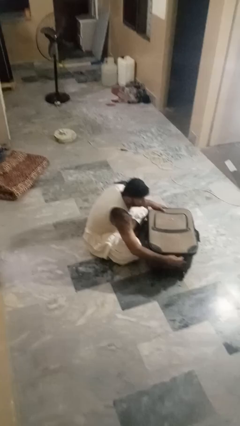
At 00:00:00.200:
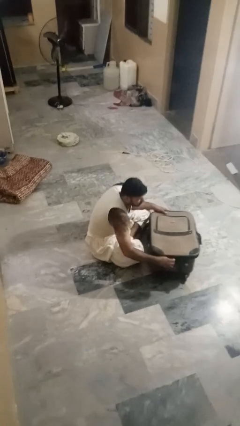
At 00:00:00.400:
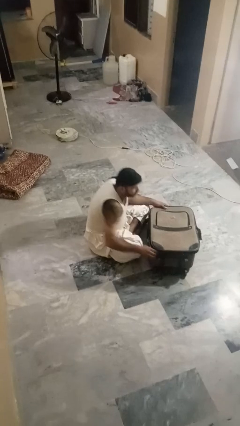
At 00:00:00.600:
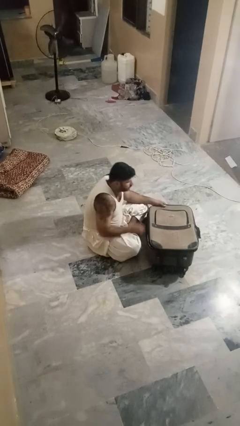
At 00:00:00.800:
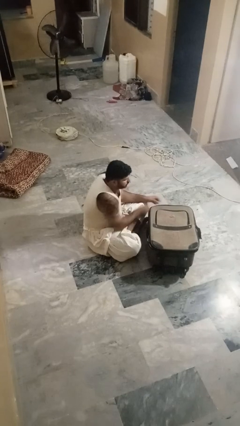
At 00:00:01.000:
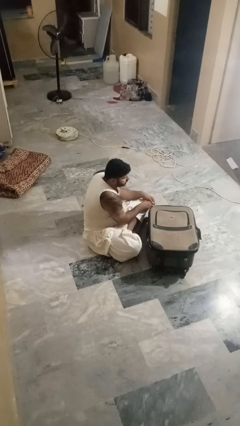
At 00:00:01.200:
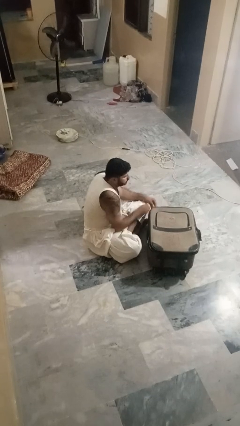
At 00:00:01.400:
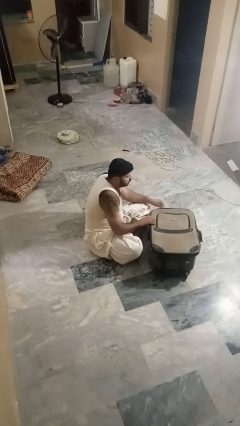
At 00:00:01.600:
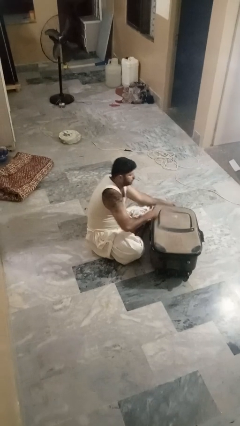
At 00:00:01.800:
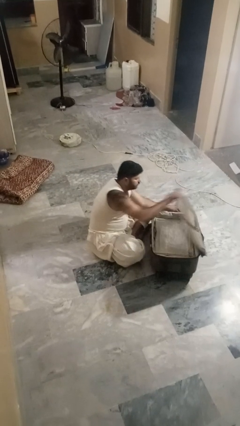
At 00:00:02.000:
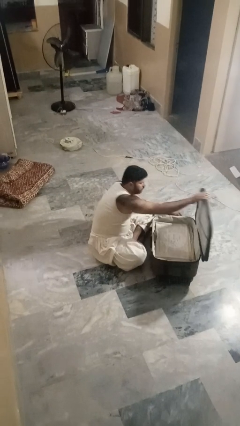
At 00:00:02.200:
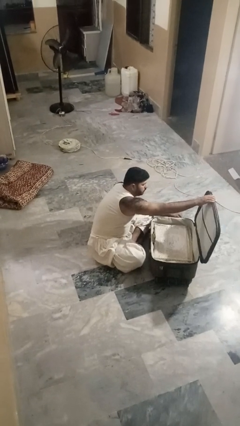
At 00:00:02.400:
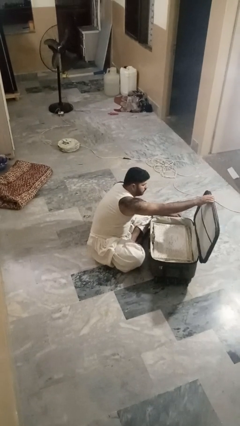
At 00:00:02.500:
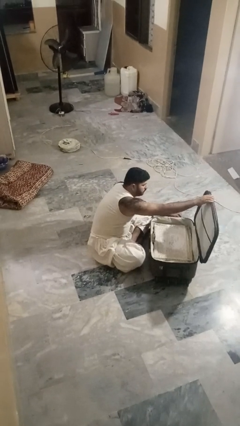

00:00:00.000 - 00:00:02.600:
person opens suitcase

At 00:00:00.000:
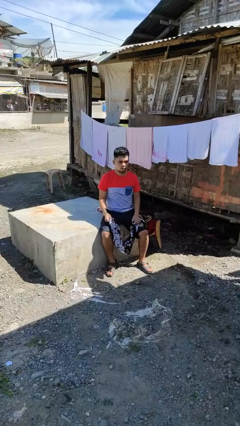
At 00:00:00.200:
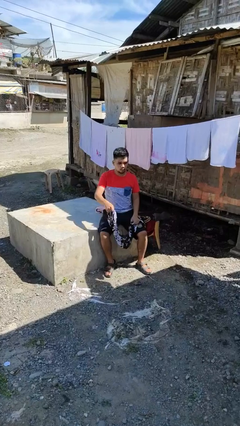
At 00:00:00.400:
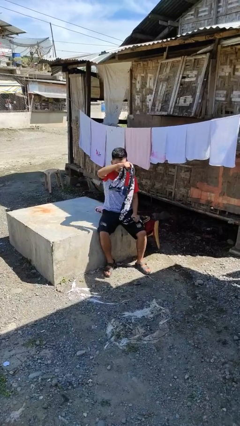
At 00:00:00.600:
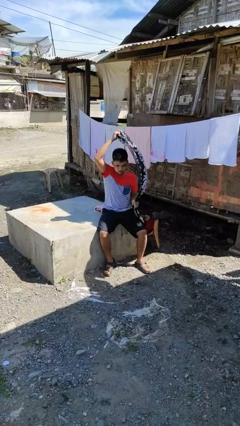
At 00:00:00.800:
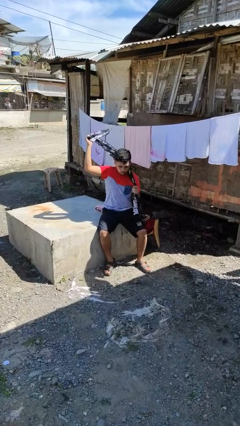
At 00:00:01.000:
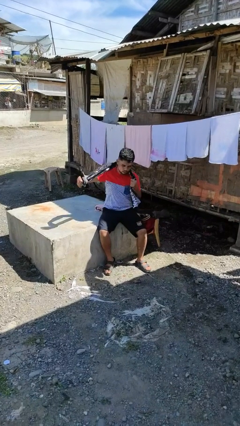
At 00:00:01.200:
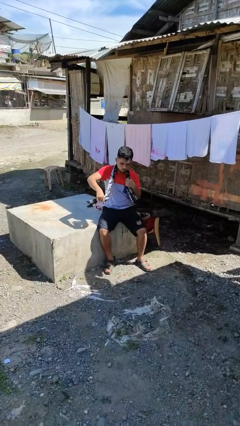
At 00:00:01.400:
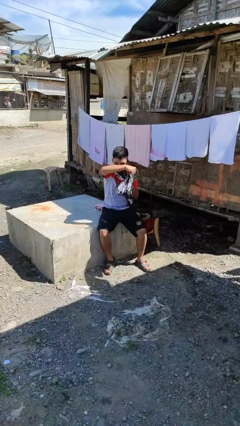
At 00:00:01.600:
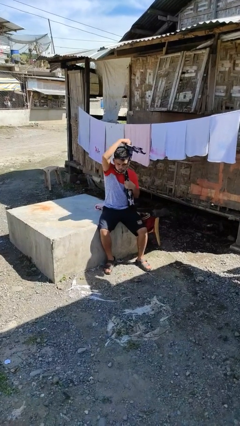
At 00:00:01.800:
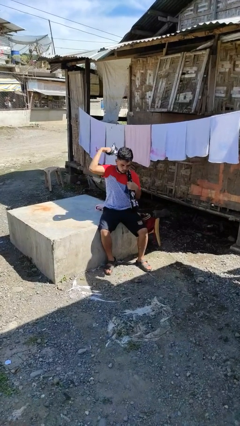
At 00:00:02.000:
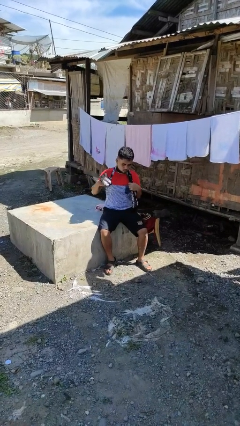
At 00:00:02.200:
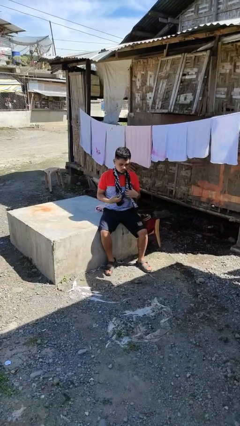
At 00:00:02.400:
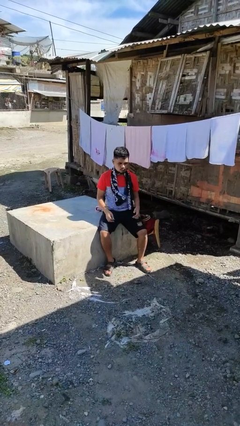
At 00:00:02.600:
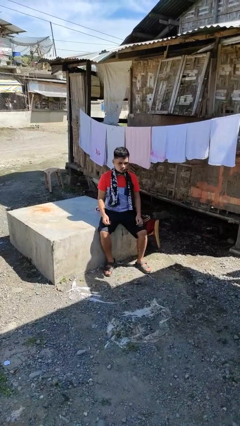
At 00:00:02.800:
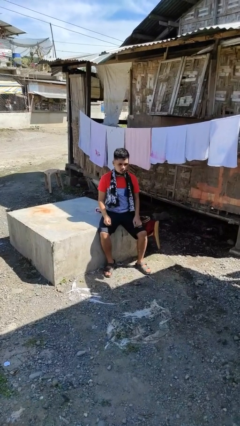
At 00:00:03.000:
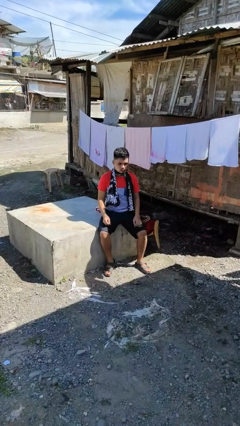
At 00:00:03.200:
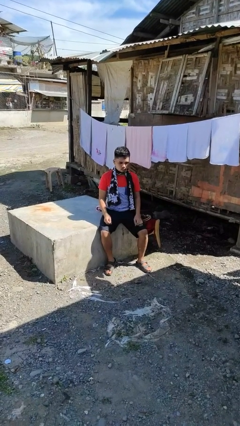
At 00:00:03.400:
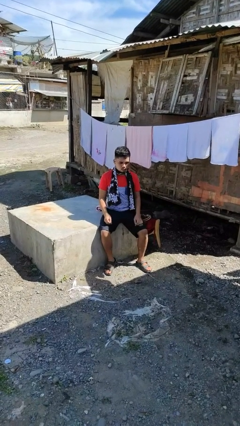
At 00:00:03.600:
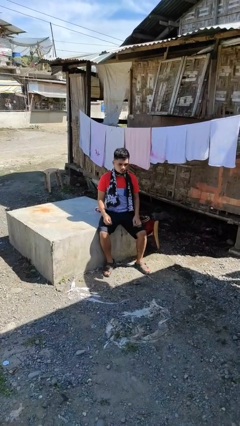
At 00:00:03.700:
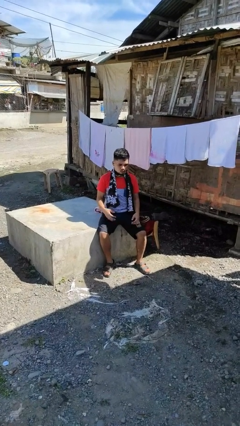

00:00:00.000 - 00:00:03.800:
person puts on scarf

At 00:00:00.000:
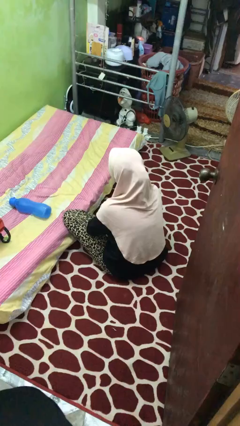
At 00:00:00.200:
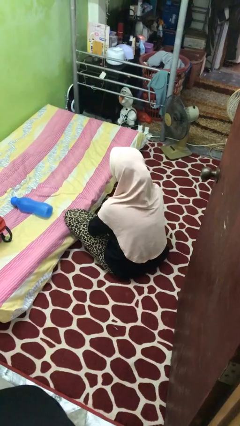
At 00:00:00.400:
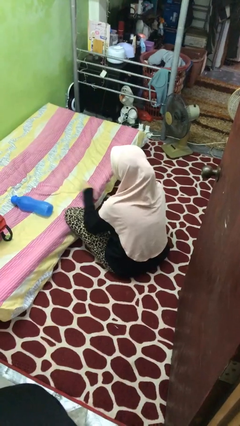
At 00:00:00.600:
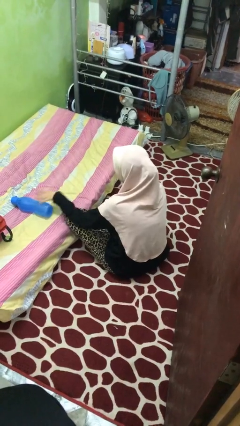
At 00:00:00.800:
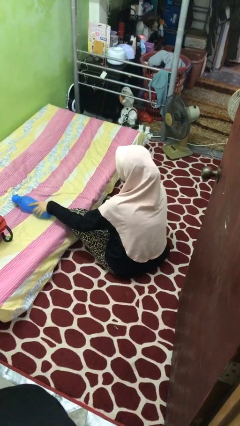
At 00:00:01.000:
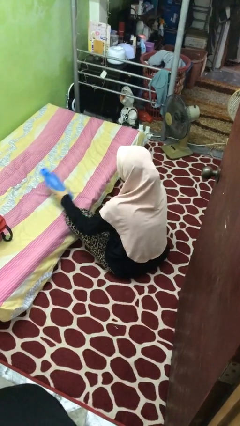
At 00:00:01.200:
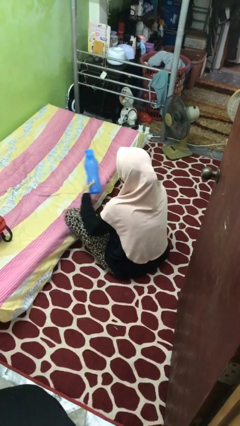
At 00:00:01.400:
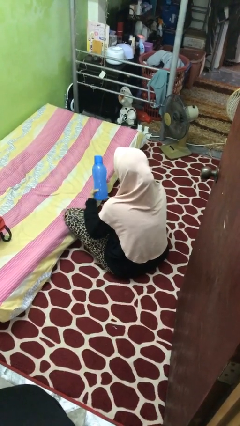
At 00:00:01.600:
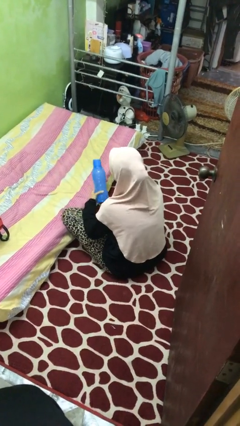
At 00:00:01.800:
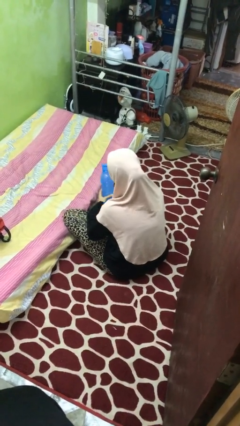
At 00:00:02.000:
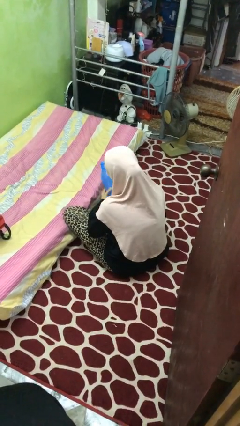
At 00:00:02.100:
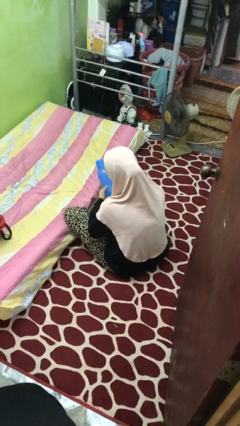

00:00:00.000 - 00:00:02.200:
person picks up object from bed

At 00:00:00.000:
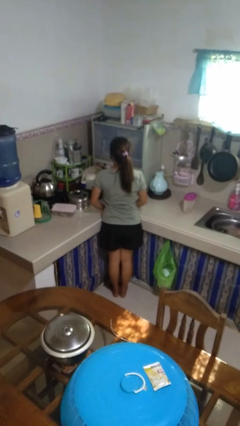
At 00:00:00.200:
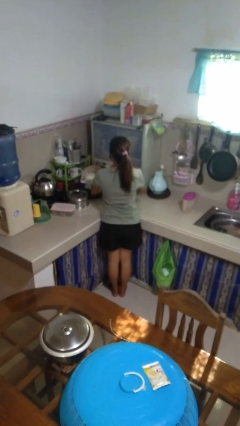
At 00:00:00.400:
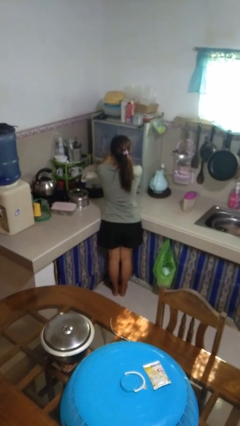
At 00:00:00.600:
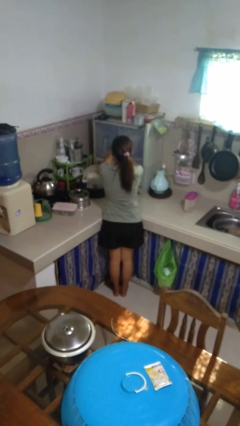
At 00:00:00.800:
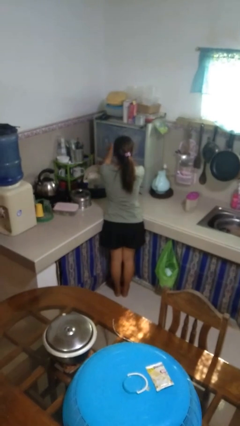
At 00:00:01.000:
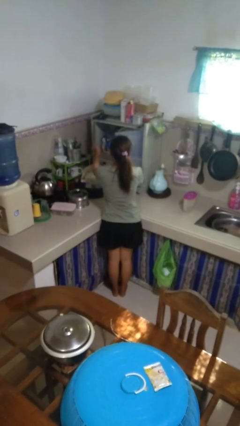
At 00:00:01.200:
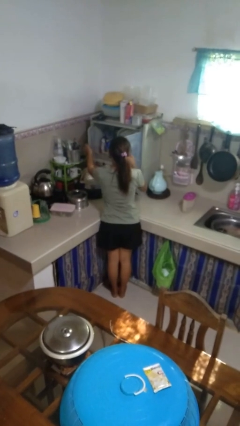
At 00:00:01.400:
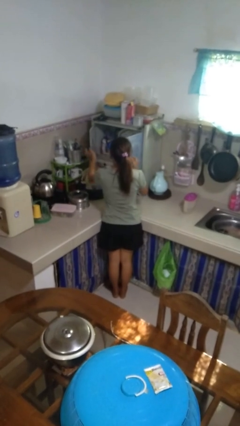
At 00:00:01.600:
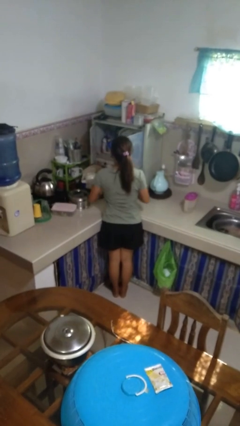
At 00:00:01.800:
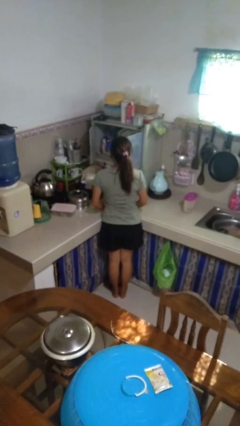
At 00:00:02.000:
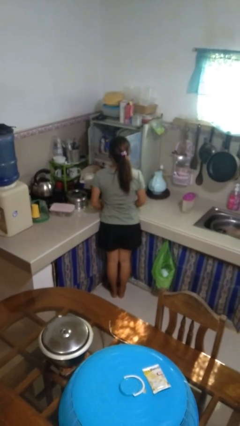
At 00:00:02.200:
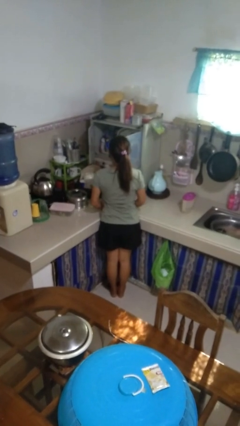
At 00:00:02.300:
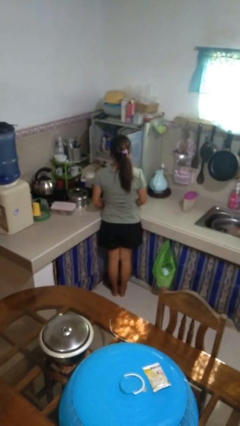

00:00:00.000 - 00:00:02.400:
person opens kitchen drawer

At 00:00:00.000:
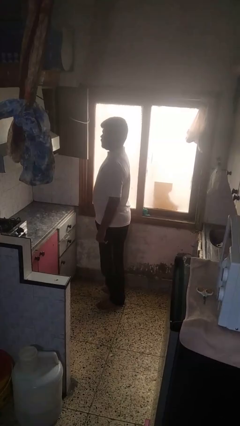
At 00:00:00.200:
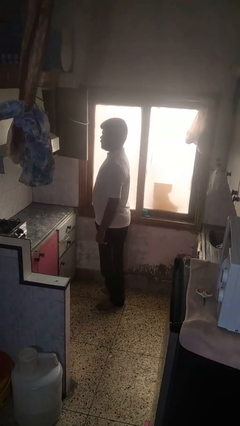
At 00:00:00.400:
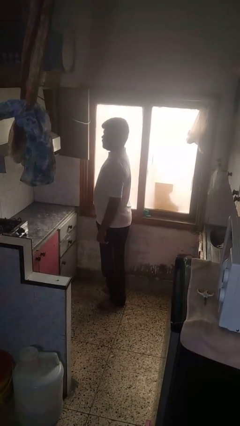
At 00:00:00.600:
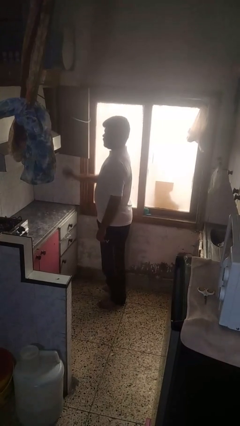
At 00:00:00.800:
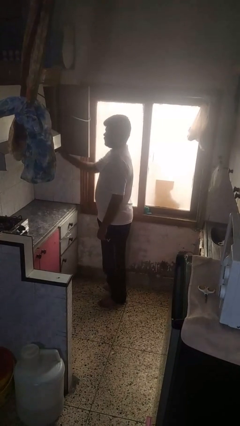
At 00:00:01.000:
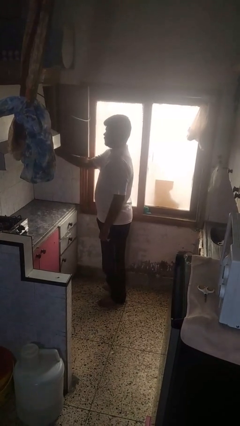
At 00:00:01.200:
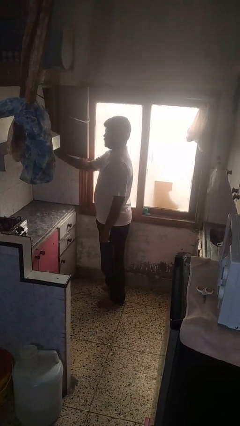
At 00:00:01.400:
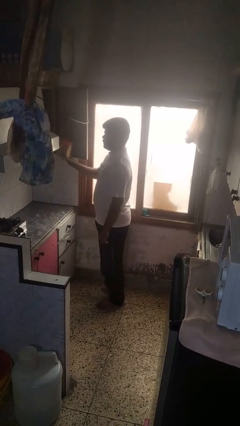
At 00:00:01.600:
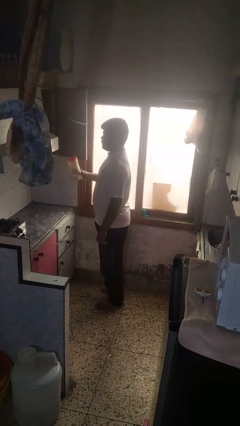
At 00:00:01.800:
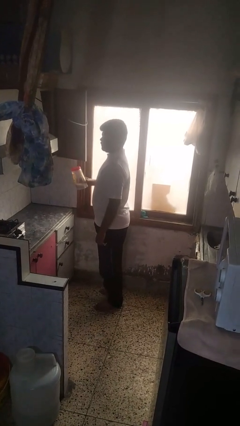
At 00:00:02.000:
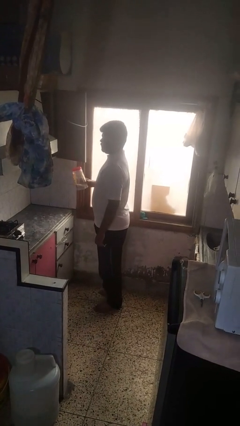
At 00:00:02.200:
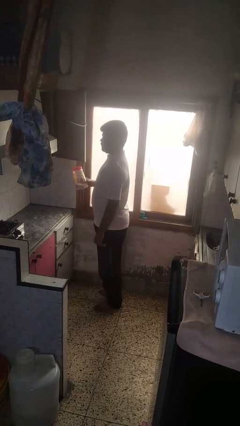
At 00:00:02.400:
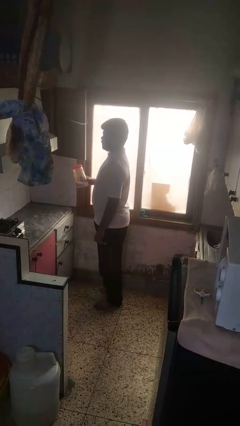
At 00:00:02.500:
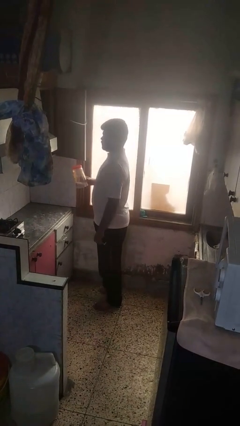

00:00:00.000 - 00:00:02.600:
person picks up object from cabinet

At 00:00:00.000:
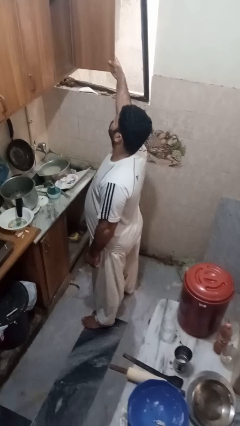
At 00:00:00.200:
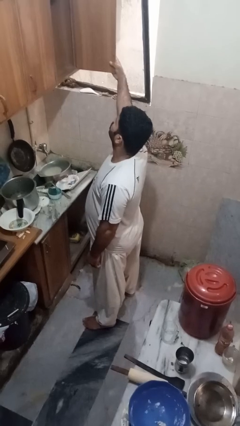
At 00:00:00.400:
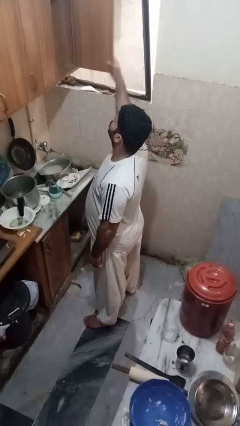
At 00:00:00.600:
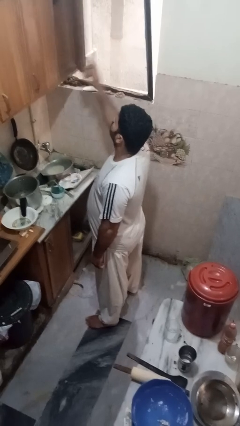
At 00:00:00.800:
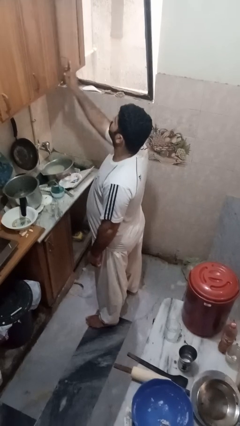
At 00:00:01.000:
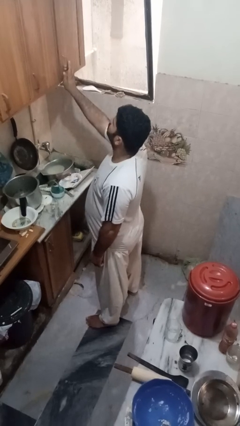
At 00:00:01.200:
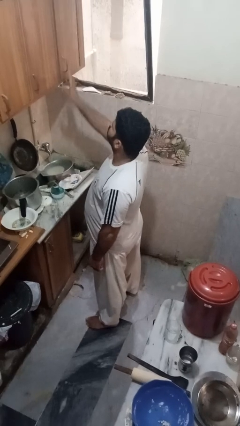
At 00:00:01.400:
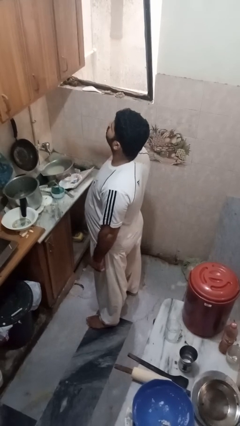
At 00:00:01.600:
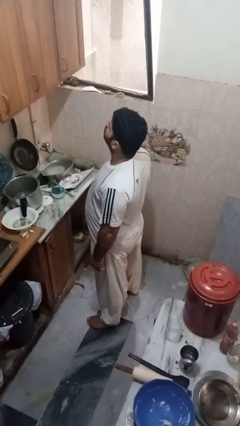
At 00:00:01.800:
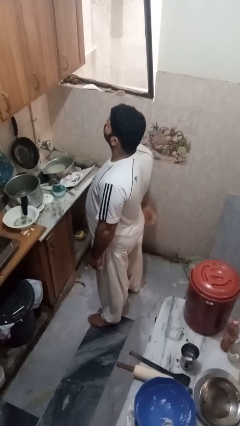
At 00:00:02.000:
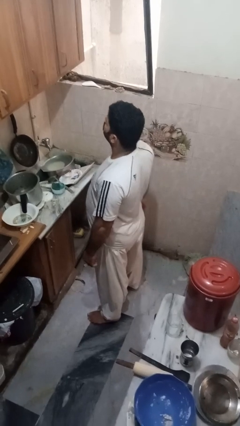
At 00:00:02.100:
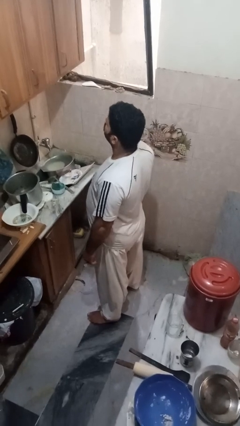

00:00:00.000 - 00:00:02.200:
person closes cabinet

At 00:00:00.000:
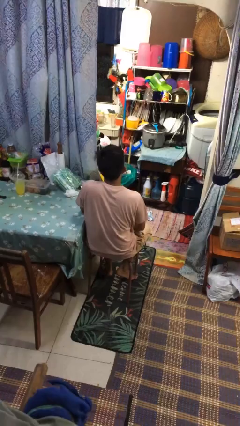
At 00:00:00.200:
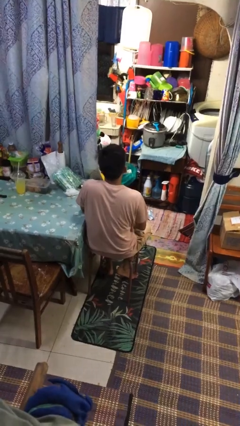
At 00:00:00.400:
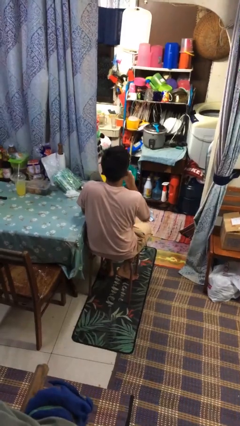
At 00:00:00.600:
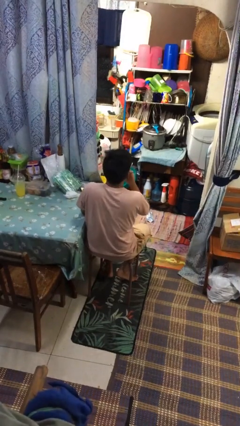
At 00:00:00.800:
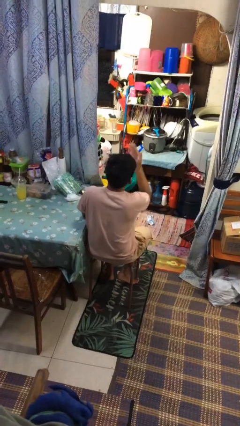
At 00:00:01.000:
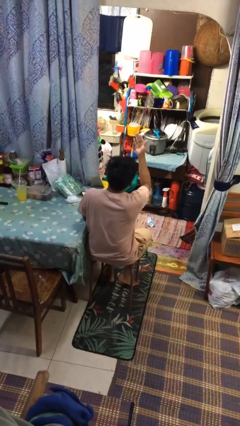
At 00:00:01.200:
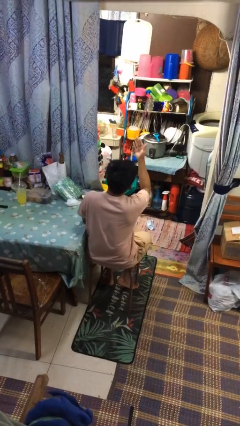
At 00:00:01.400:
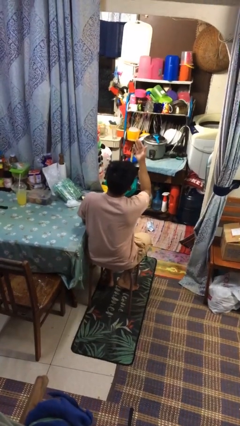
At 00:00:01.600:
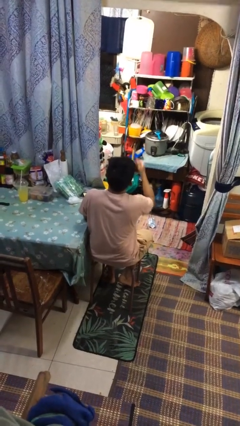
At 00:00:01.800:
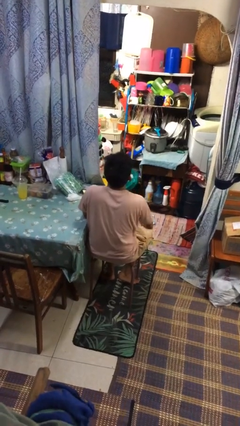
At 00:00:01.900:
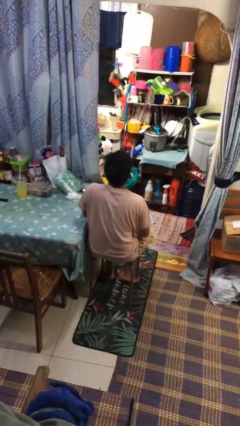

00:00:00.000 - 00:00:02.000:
person gestures blow kiss
